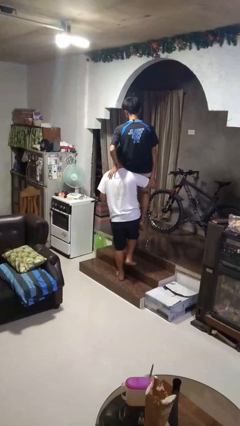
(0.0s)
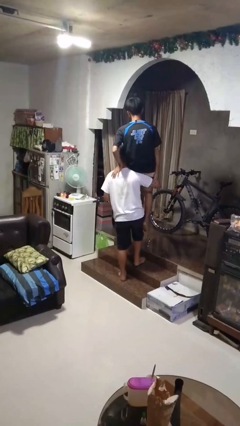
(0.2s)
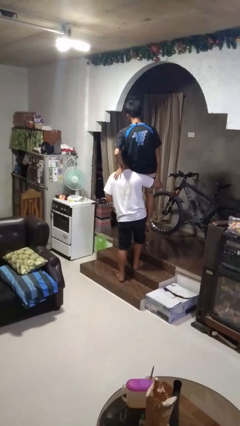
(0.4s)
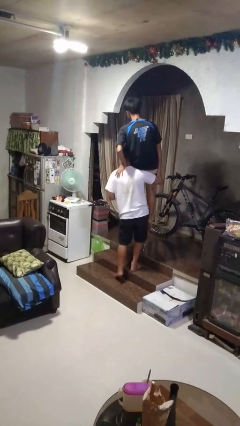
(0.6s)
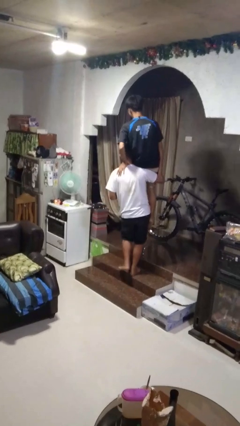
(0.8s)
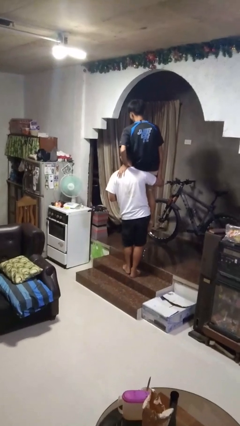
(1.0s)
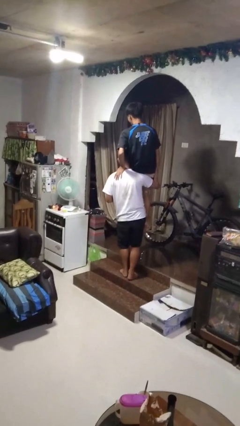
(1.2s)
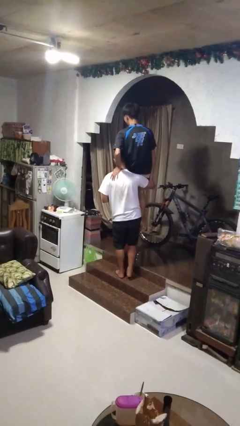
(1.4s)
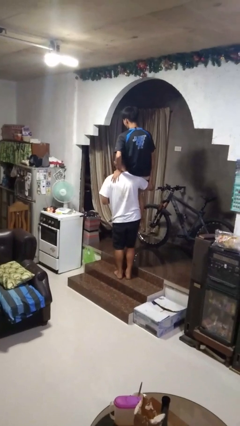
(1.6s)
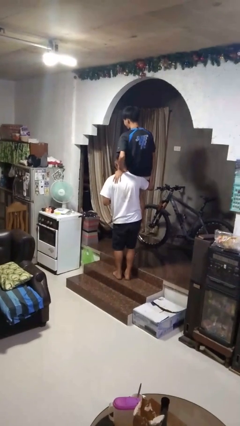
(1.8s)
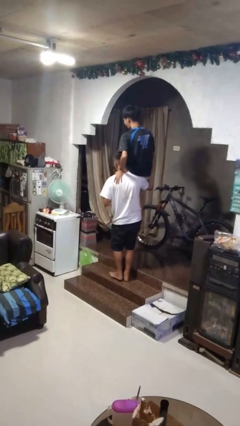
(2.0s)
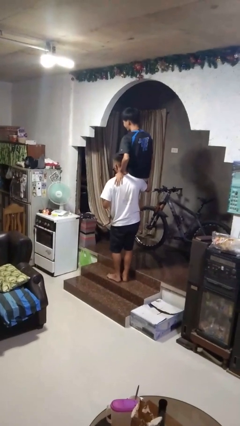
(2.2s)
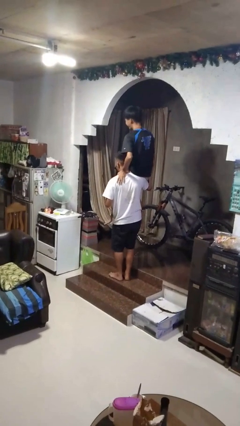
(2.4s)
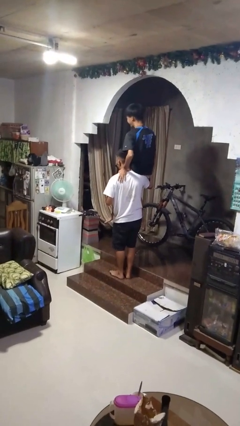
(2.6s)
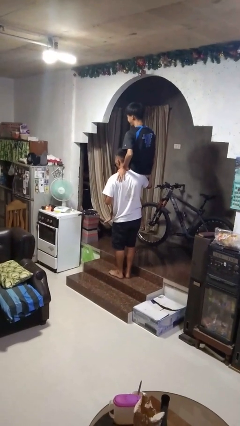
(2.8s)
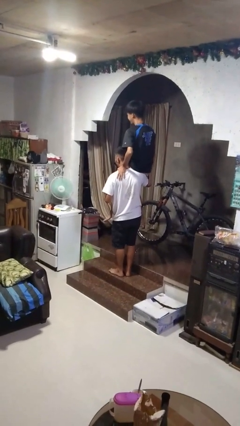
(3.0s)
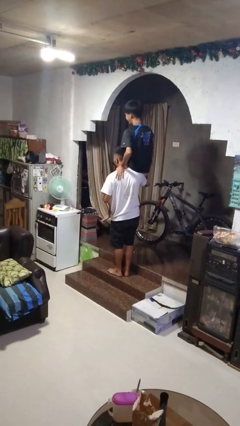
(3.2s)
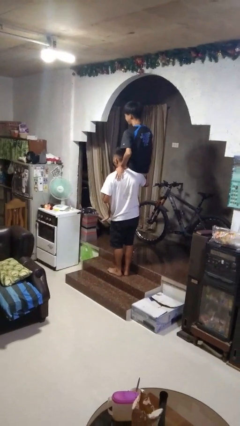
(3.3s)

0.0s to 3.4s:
person carries person on back

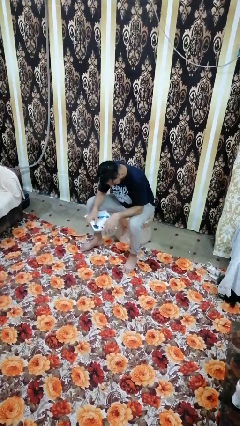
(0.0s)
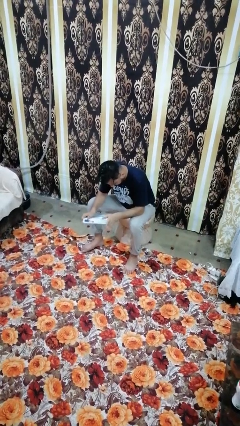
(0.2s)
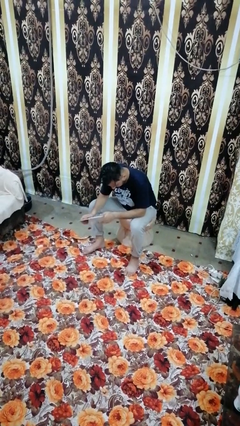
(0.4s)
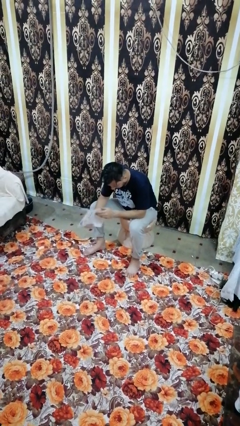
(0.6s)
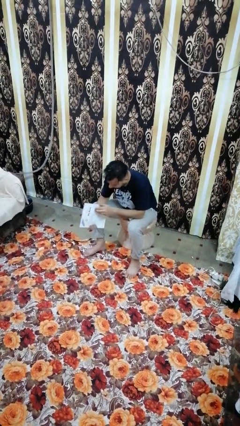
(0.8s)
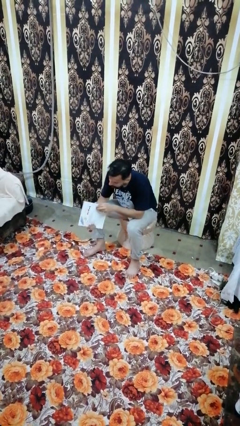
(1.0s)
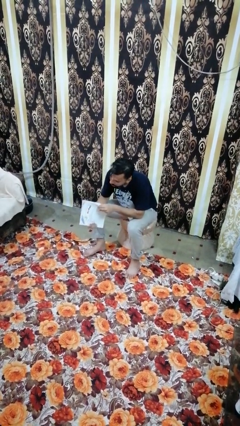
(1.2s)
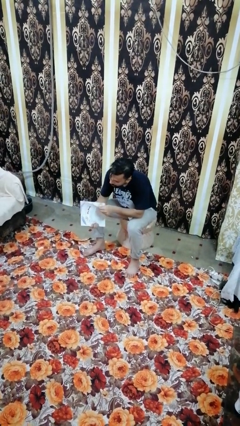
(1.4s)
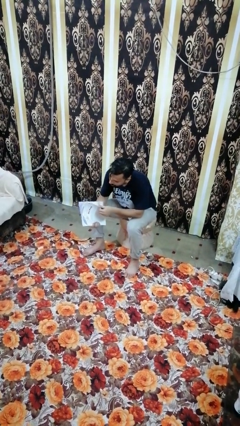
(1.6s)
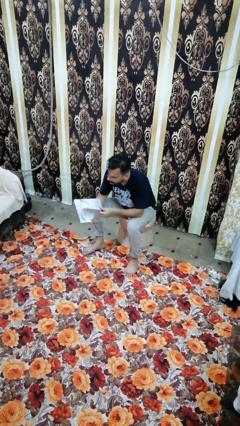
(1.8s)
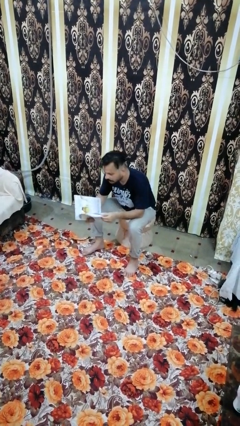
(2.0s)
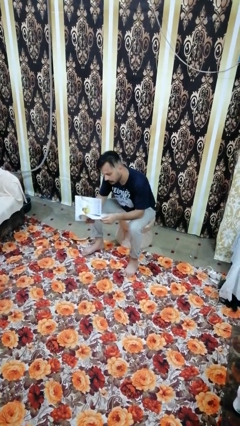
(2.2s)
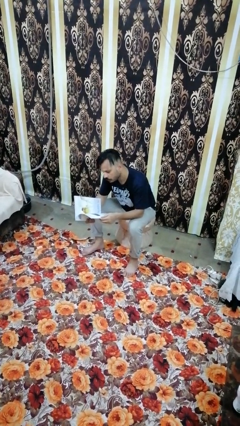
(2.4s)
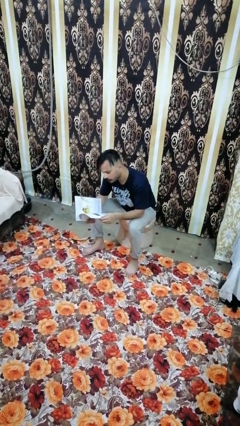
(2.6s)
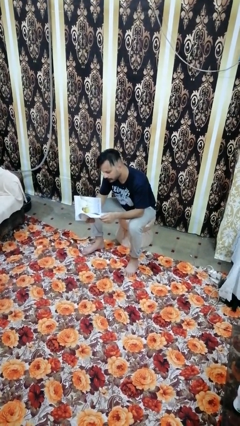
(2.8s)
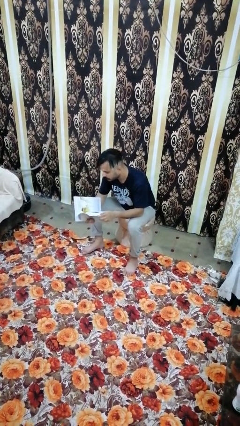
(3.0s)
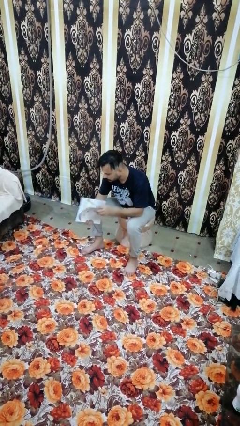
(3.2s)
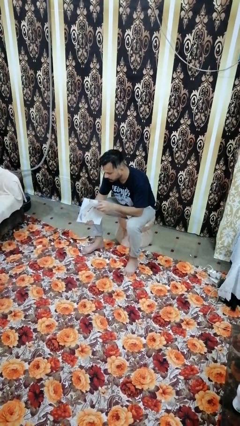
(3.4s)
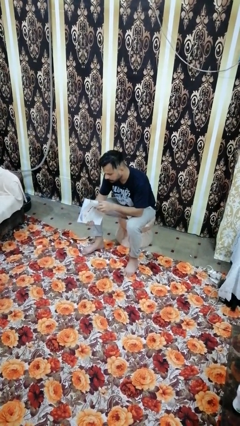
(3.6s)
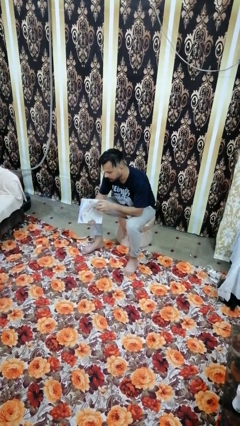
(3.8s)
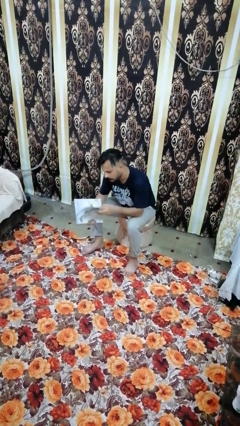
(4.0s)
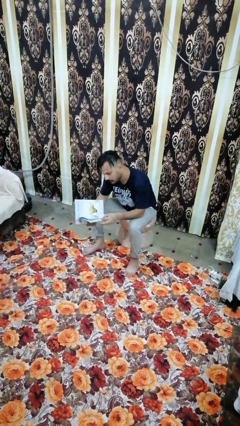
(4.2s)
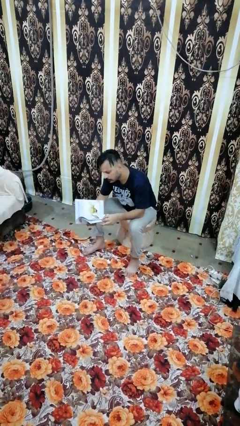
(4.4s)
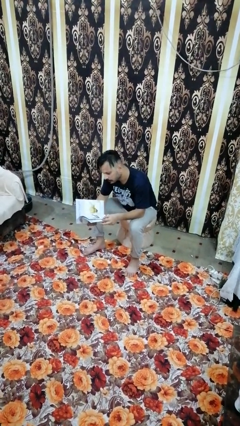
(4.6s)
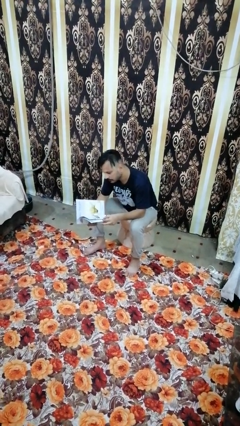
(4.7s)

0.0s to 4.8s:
person reads magazine

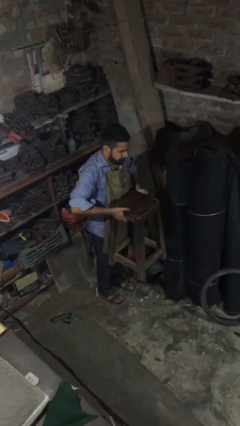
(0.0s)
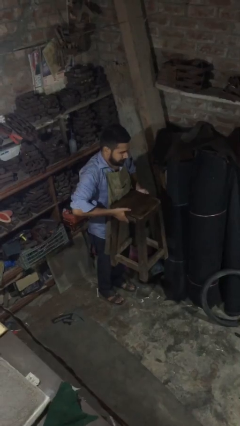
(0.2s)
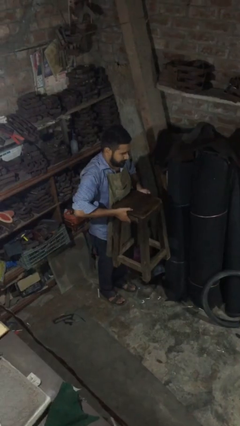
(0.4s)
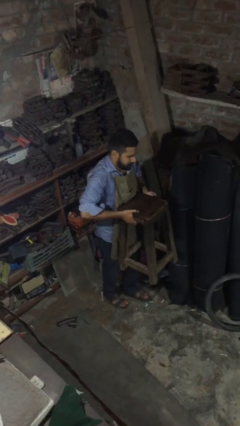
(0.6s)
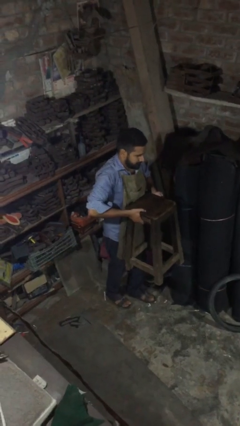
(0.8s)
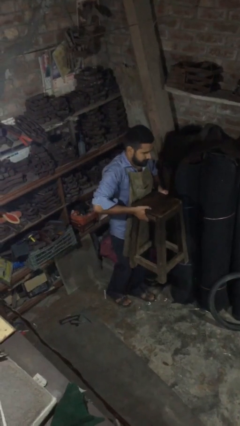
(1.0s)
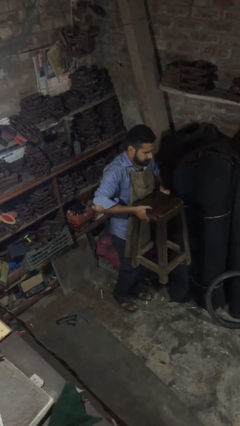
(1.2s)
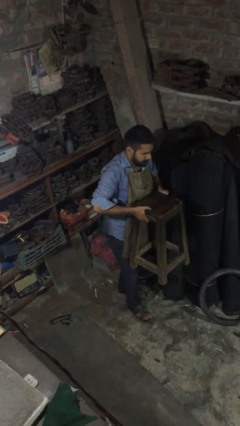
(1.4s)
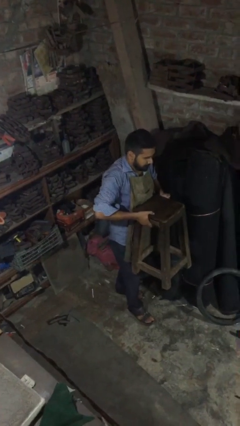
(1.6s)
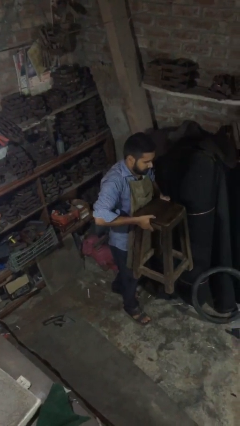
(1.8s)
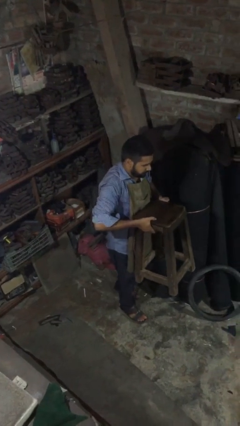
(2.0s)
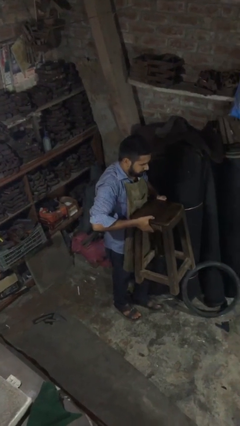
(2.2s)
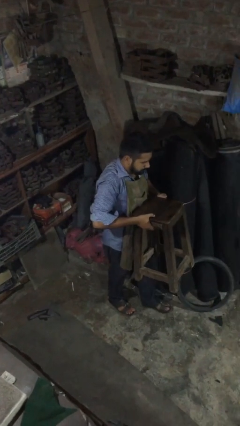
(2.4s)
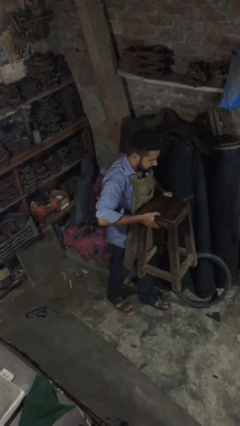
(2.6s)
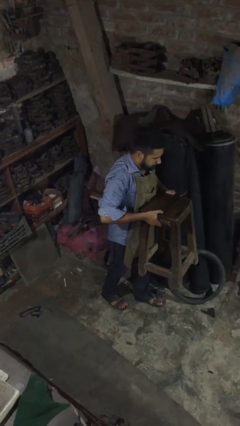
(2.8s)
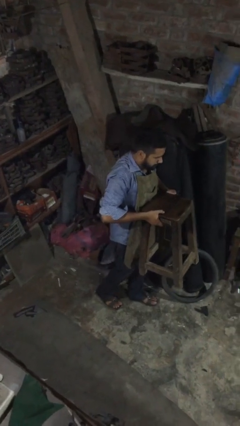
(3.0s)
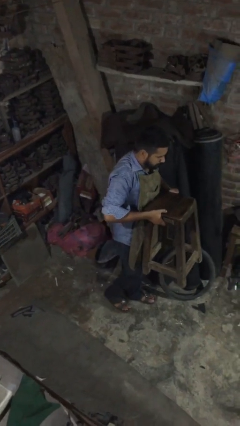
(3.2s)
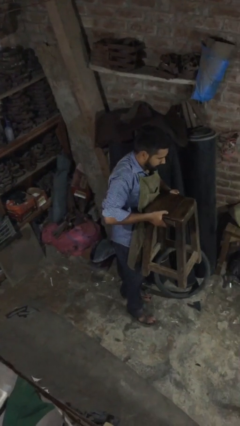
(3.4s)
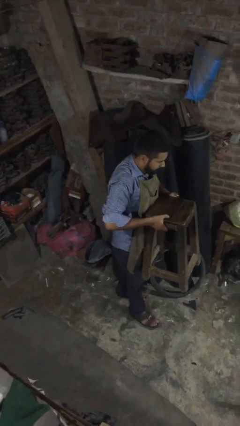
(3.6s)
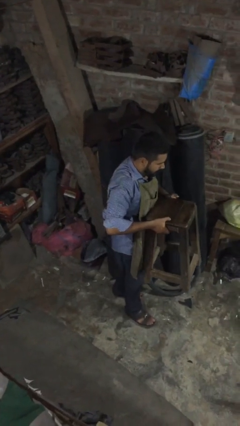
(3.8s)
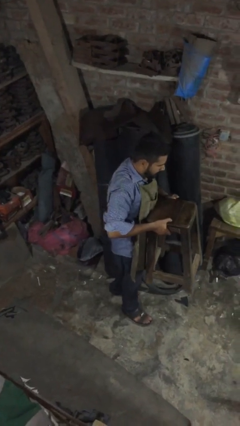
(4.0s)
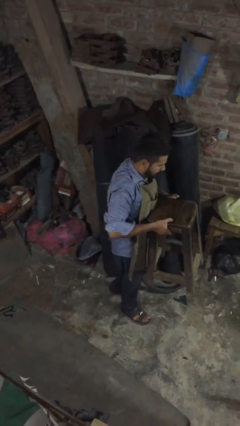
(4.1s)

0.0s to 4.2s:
person carries heavy object

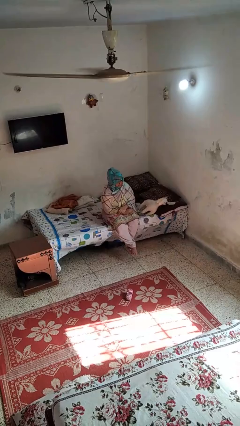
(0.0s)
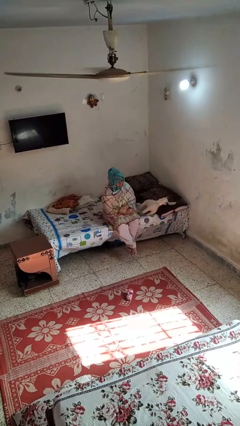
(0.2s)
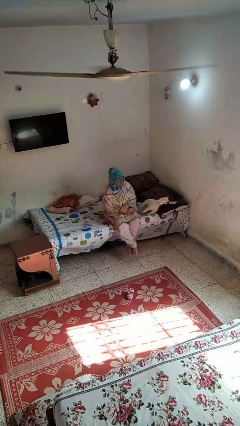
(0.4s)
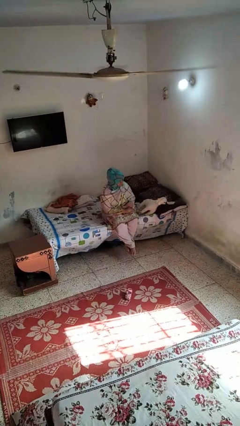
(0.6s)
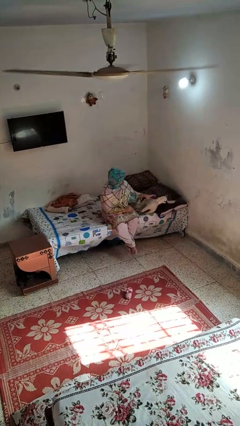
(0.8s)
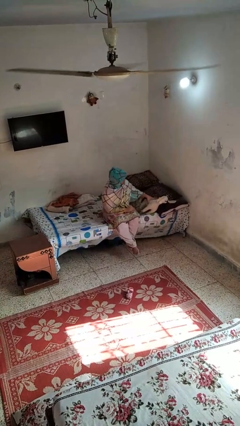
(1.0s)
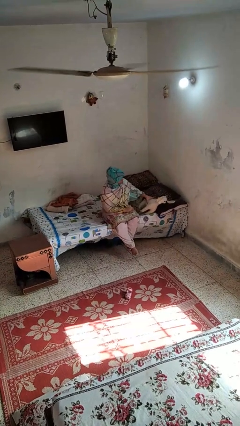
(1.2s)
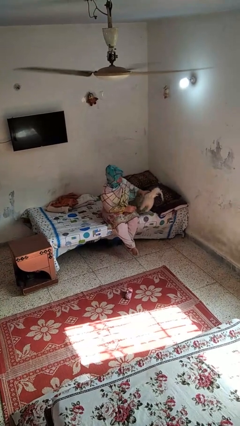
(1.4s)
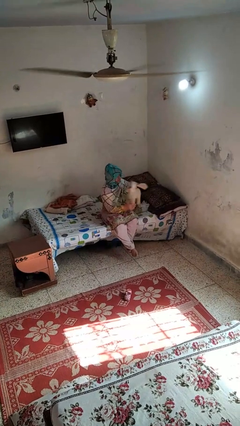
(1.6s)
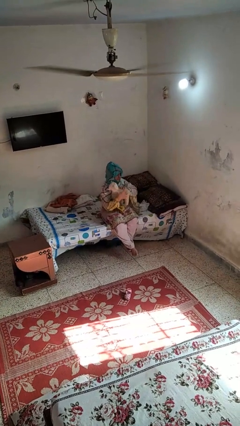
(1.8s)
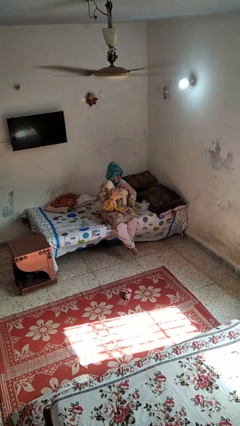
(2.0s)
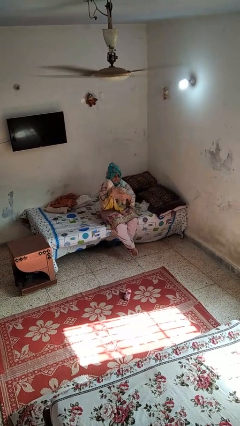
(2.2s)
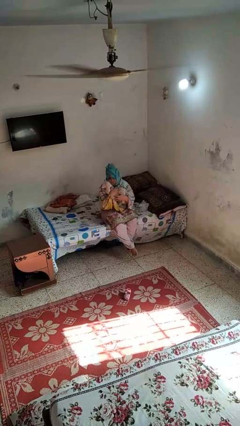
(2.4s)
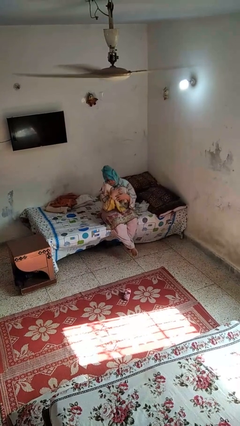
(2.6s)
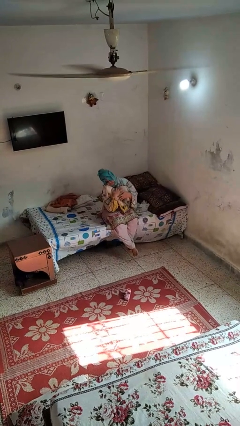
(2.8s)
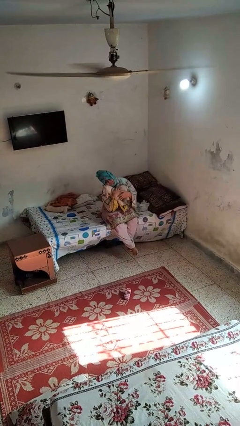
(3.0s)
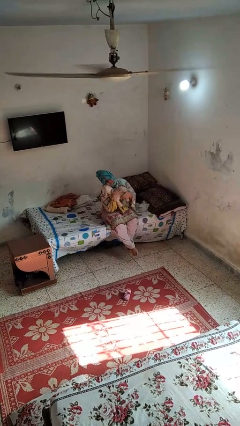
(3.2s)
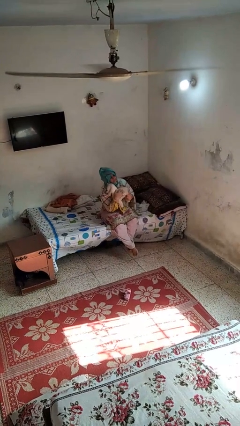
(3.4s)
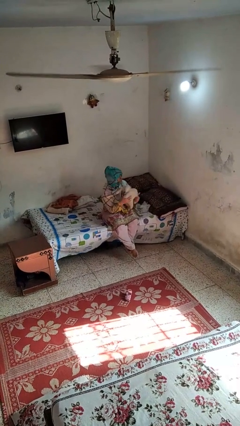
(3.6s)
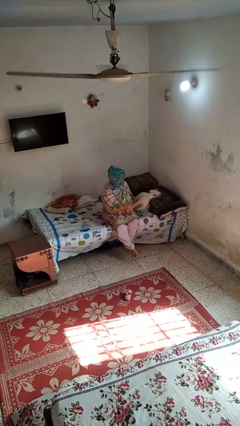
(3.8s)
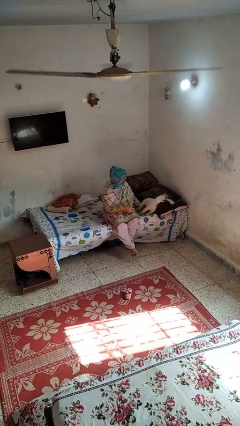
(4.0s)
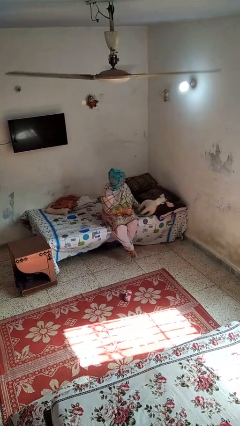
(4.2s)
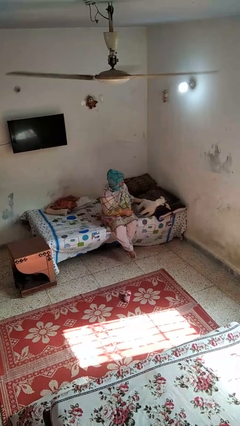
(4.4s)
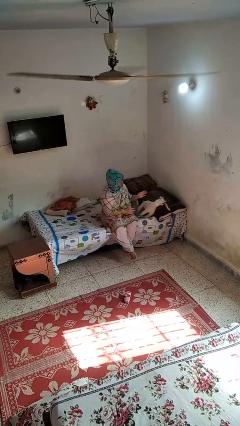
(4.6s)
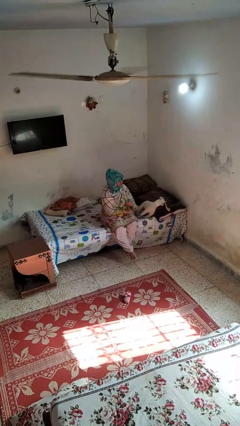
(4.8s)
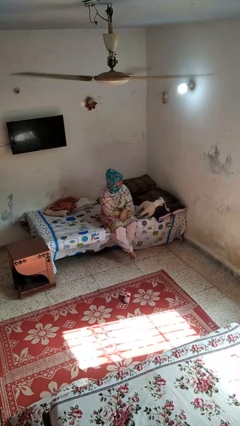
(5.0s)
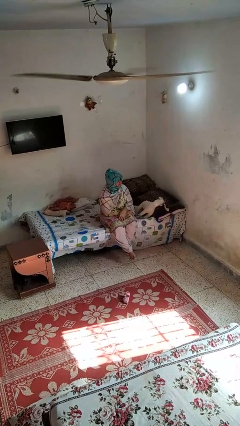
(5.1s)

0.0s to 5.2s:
person hugs stuffed animal

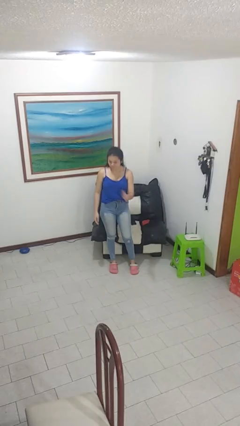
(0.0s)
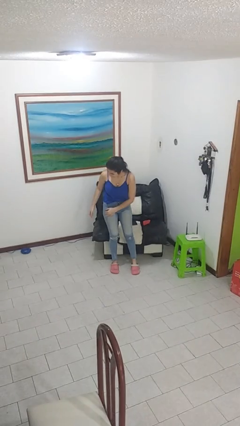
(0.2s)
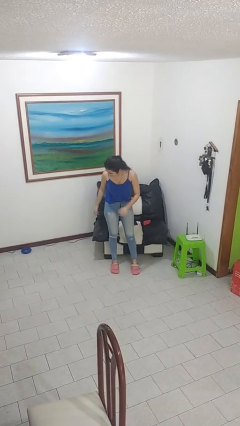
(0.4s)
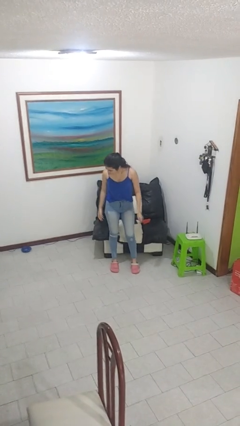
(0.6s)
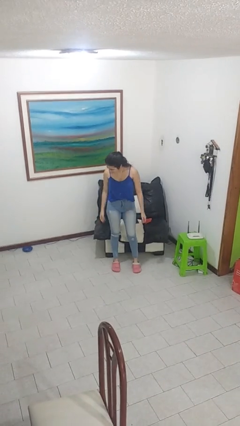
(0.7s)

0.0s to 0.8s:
person swats bug
